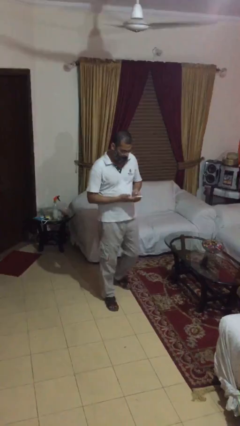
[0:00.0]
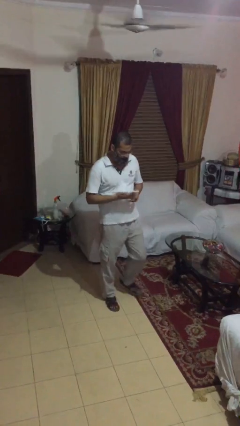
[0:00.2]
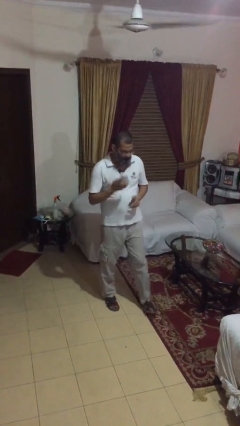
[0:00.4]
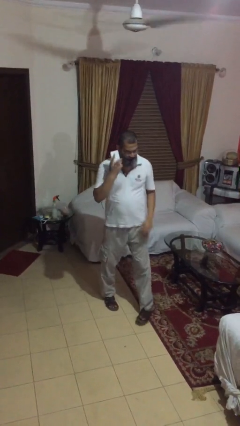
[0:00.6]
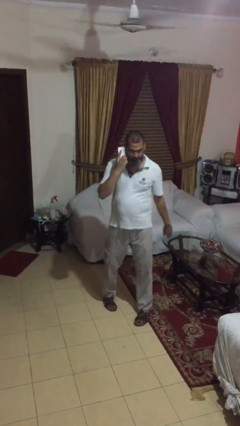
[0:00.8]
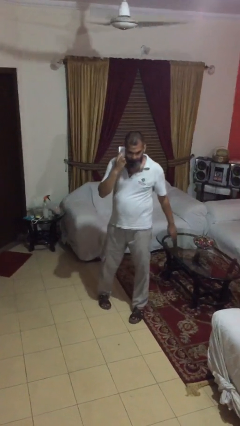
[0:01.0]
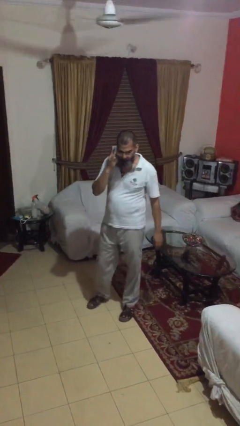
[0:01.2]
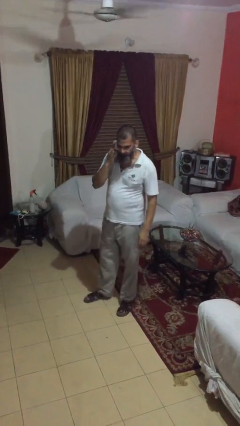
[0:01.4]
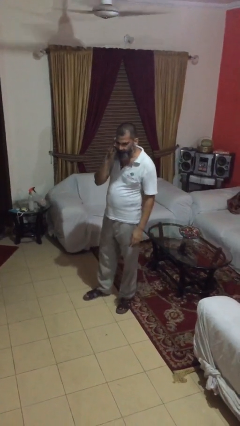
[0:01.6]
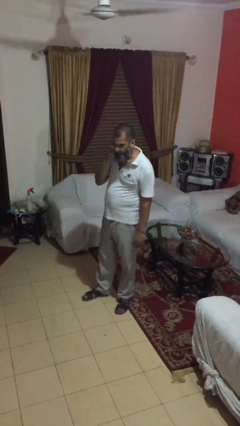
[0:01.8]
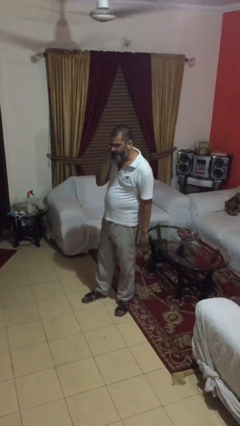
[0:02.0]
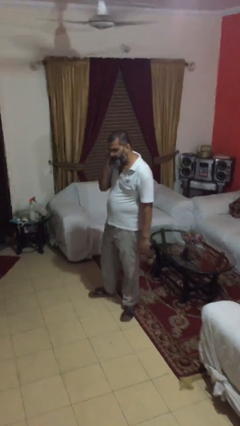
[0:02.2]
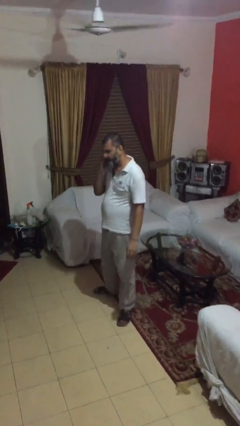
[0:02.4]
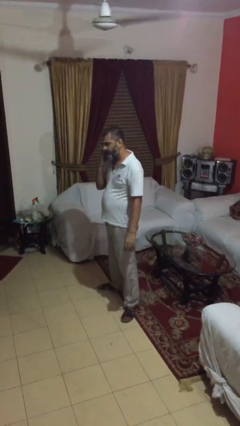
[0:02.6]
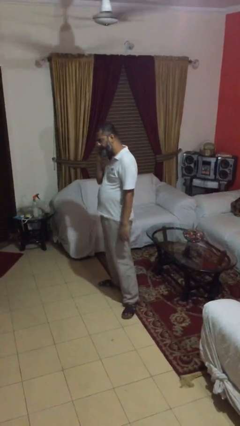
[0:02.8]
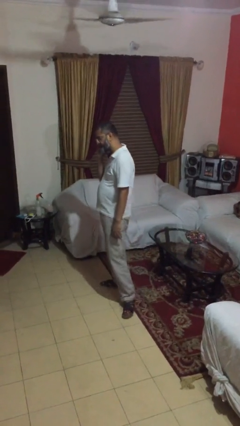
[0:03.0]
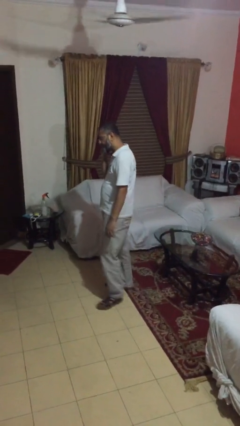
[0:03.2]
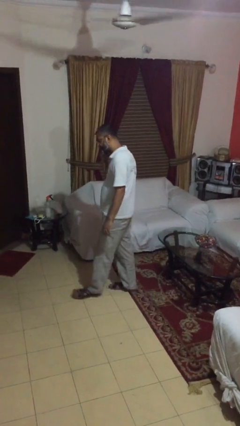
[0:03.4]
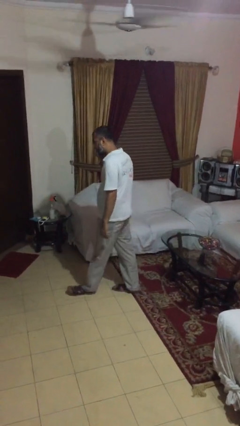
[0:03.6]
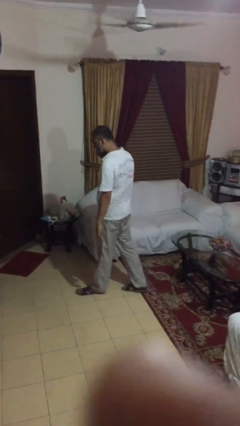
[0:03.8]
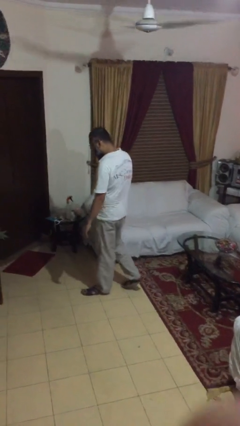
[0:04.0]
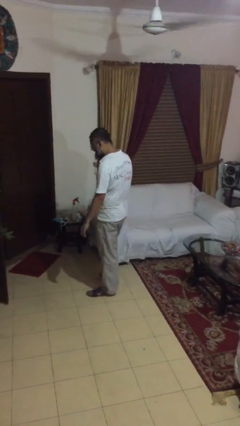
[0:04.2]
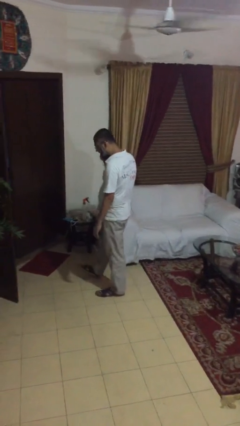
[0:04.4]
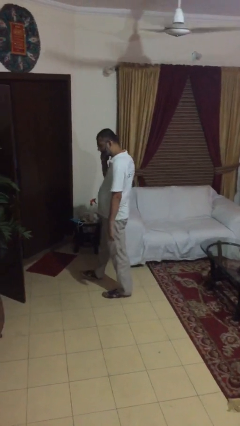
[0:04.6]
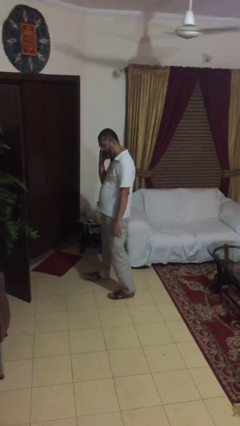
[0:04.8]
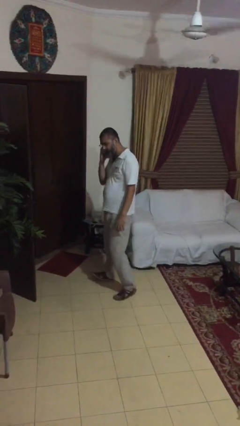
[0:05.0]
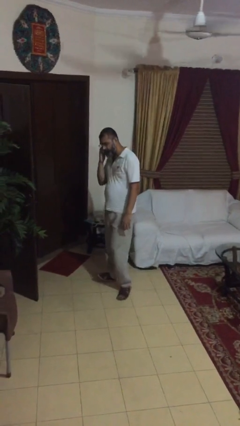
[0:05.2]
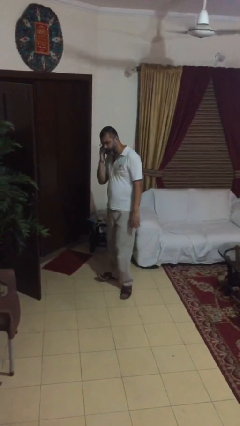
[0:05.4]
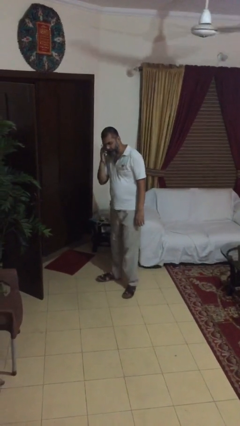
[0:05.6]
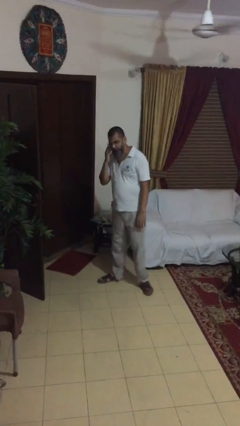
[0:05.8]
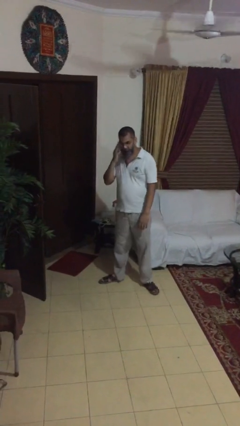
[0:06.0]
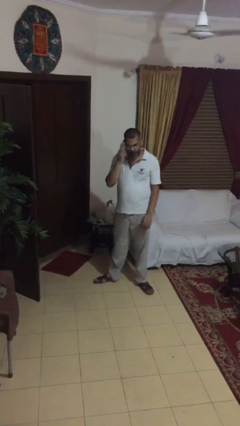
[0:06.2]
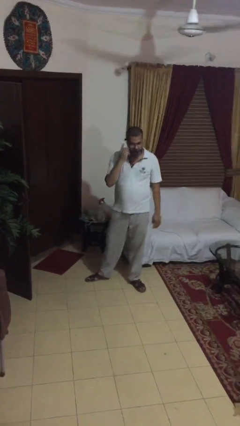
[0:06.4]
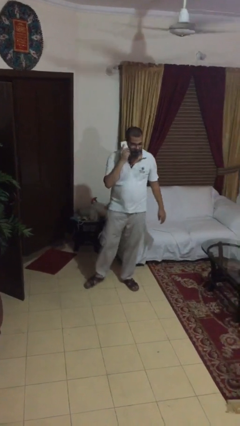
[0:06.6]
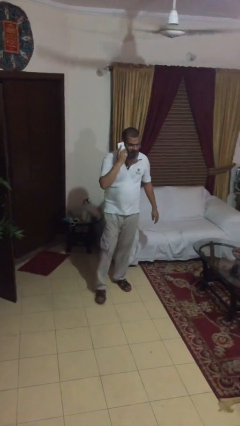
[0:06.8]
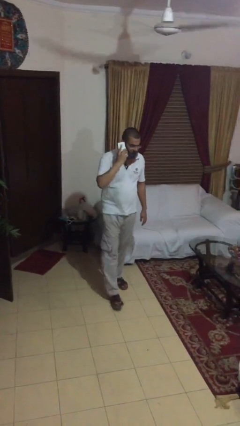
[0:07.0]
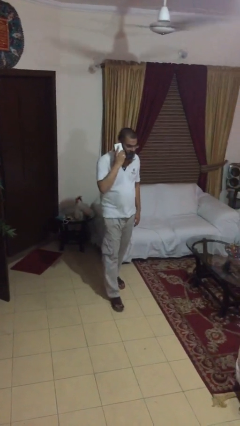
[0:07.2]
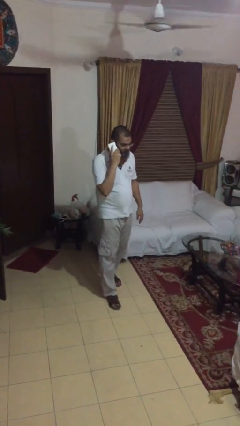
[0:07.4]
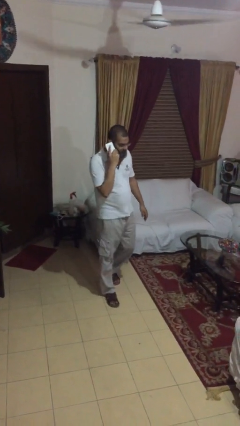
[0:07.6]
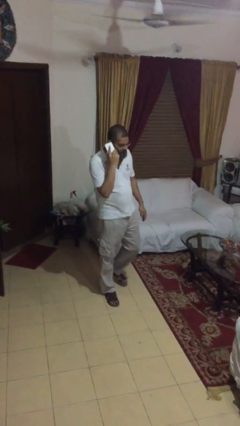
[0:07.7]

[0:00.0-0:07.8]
person talks on phone

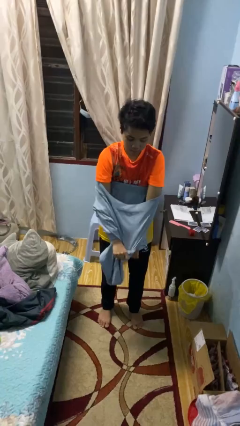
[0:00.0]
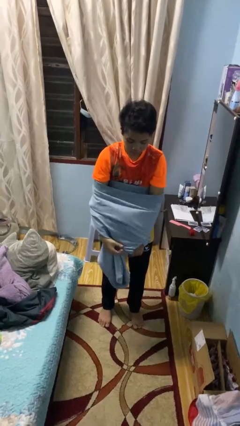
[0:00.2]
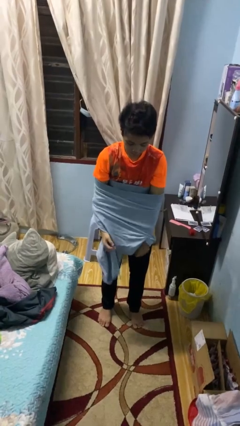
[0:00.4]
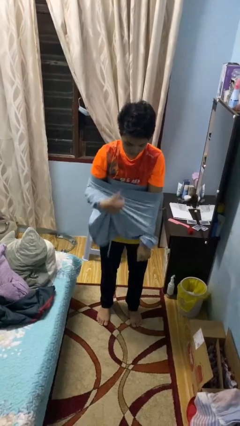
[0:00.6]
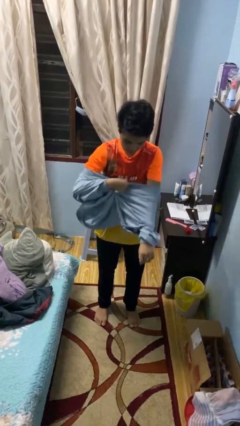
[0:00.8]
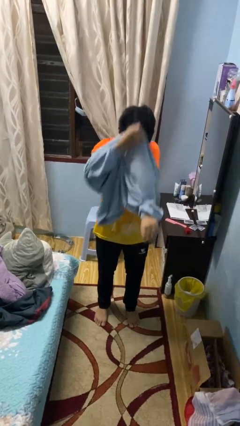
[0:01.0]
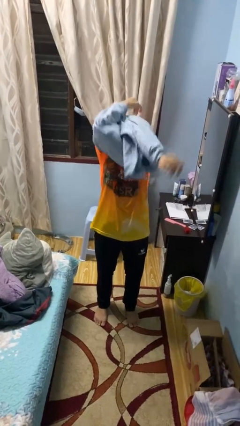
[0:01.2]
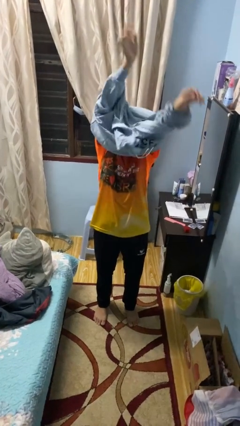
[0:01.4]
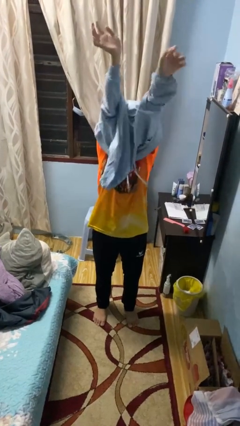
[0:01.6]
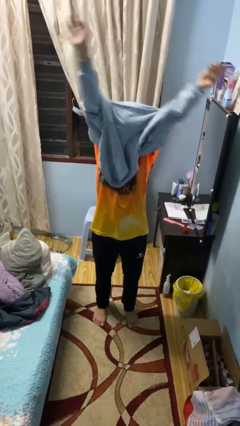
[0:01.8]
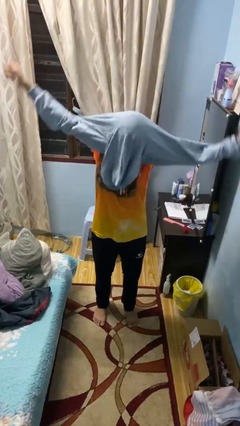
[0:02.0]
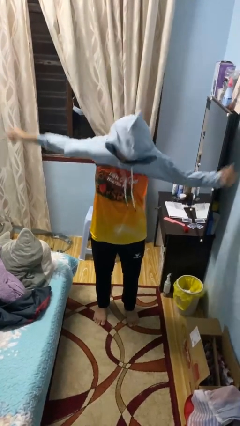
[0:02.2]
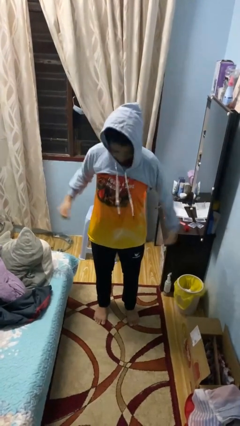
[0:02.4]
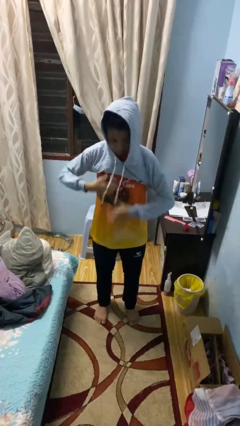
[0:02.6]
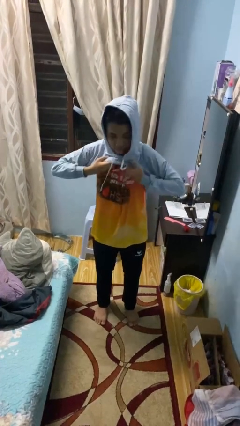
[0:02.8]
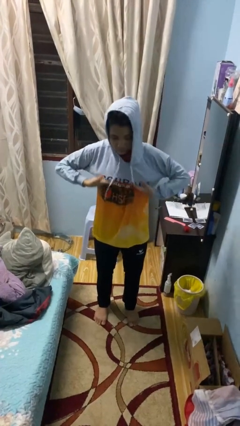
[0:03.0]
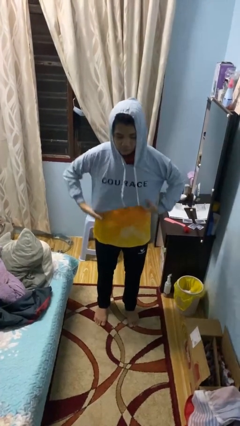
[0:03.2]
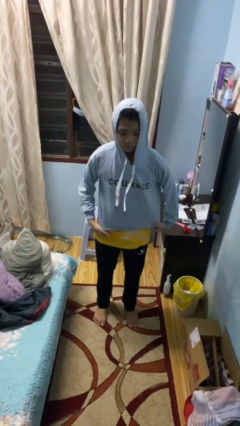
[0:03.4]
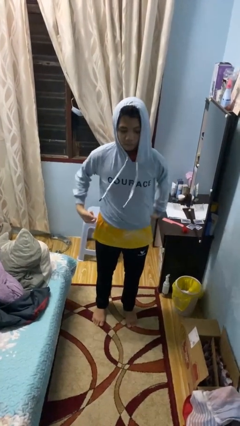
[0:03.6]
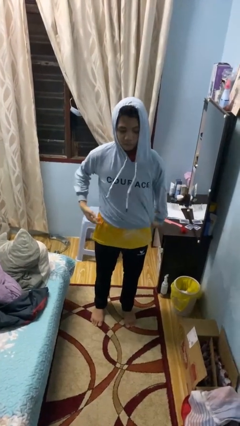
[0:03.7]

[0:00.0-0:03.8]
person puts on hoodie

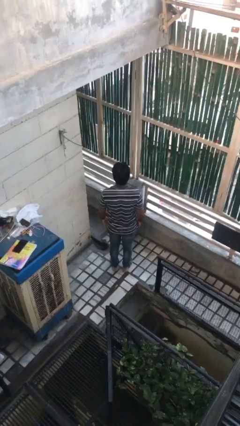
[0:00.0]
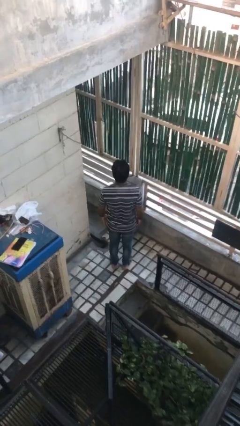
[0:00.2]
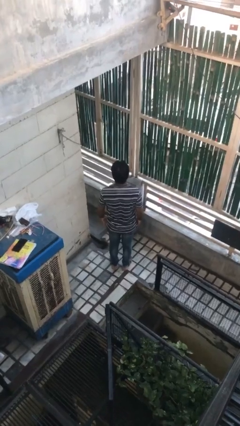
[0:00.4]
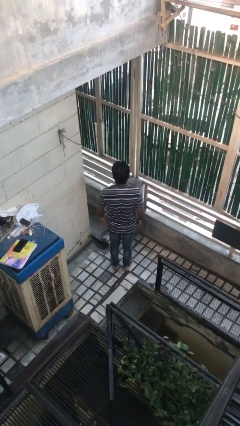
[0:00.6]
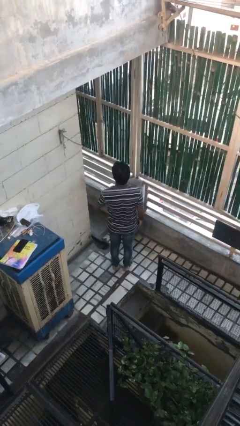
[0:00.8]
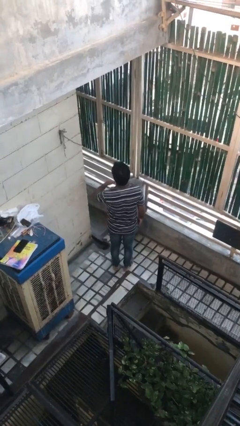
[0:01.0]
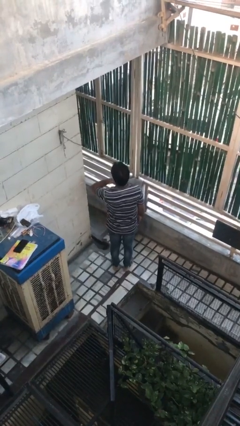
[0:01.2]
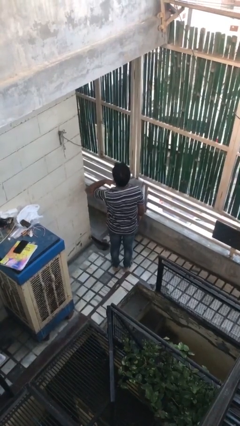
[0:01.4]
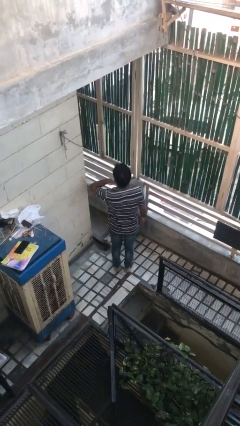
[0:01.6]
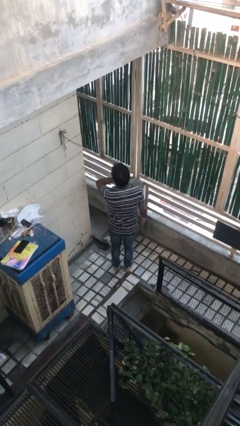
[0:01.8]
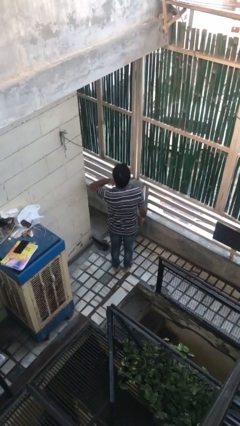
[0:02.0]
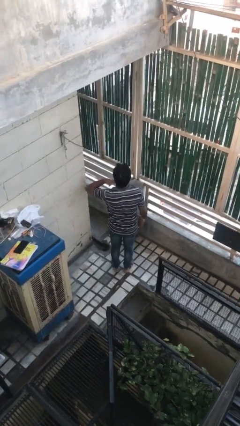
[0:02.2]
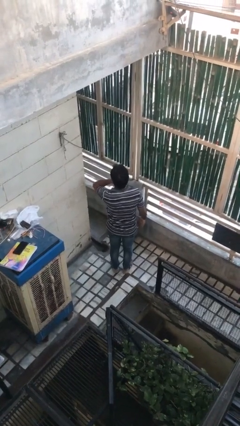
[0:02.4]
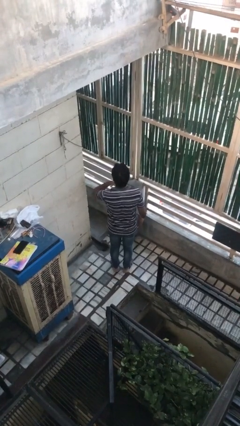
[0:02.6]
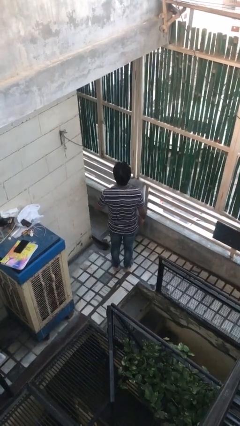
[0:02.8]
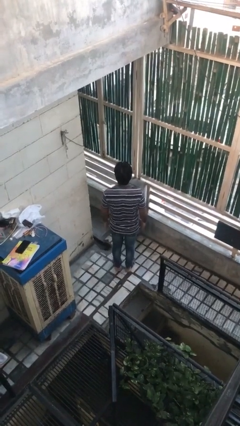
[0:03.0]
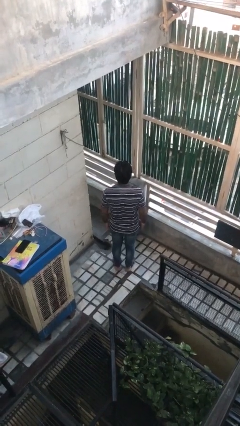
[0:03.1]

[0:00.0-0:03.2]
person gestures cut

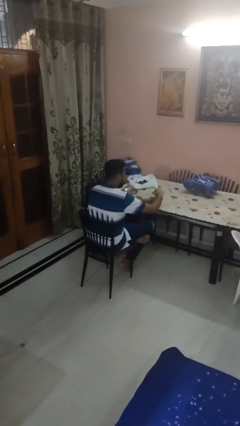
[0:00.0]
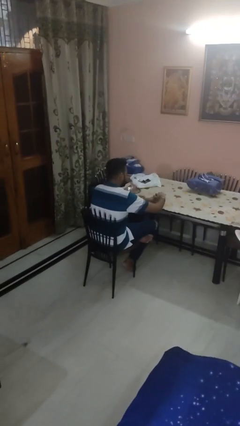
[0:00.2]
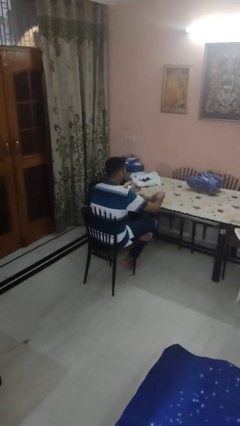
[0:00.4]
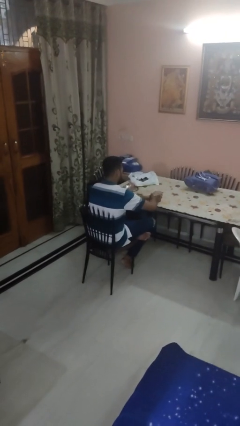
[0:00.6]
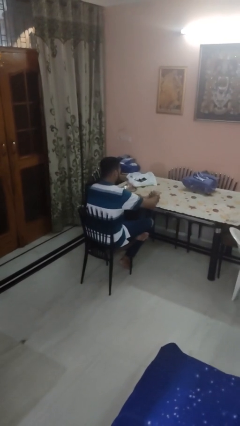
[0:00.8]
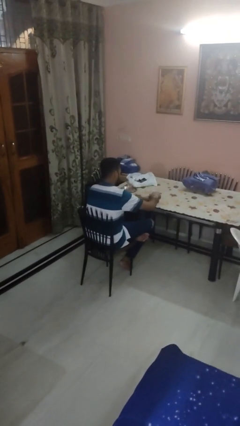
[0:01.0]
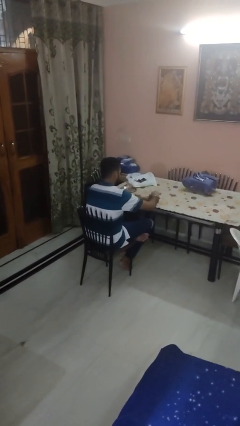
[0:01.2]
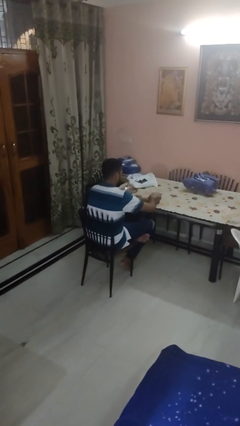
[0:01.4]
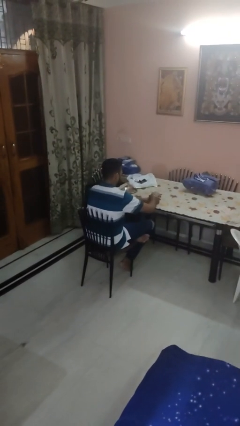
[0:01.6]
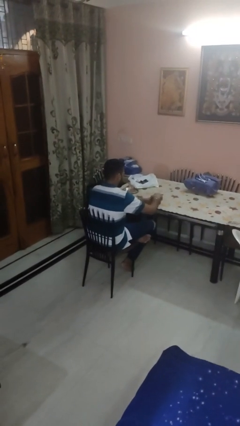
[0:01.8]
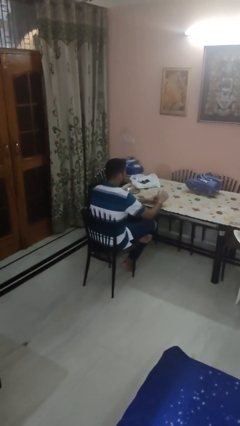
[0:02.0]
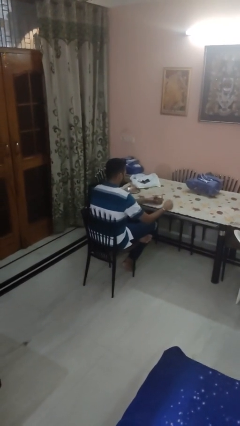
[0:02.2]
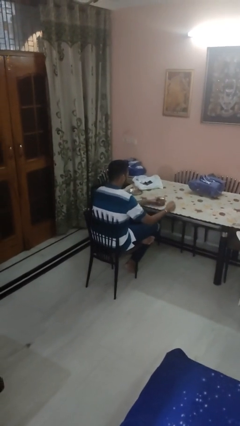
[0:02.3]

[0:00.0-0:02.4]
person closes jar

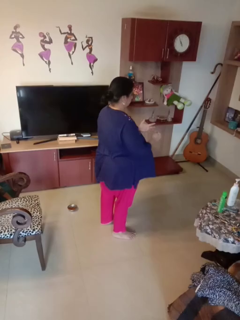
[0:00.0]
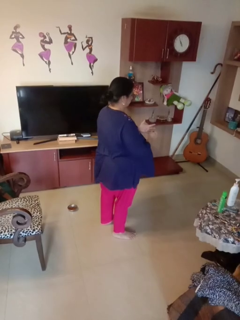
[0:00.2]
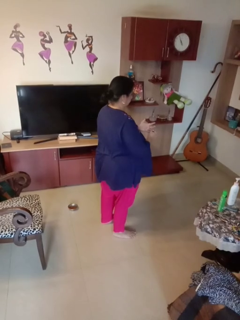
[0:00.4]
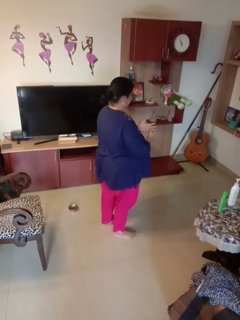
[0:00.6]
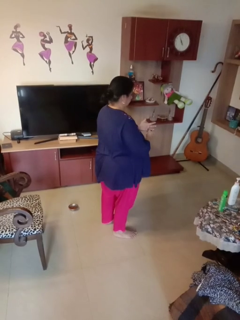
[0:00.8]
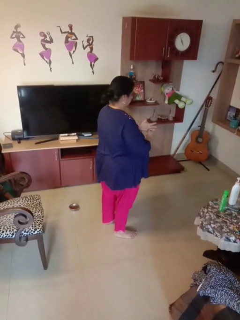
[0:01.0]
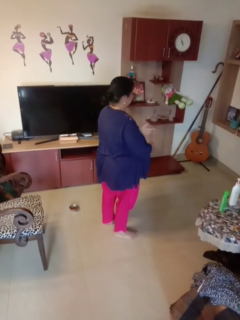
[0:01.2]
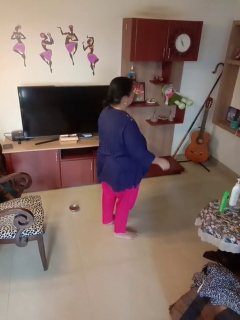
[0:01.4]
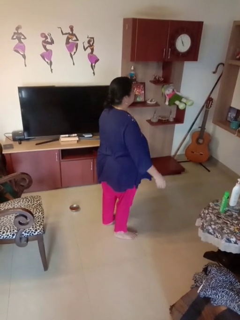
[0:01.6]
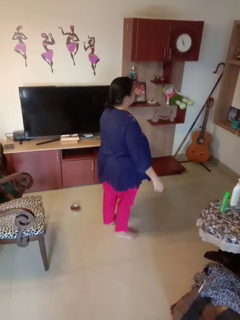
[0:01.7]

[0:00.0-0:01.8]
person puts on ring
